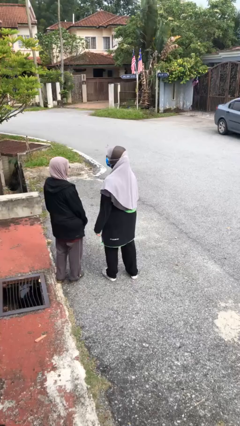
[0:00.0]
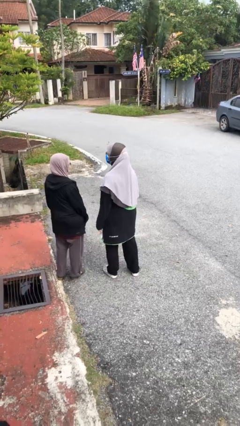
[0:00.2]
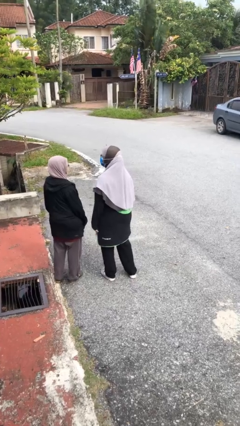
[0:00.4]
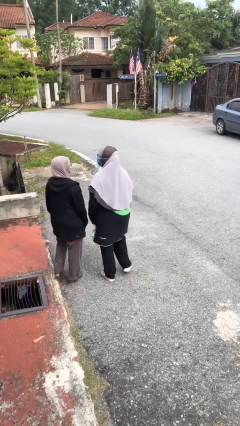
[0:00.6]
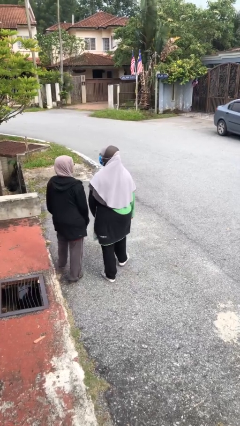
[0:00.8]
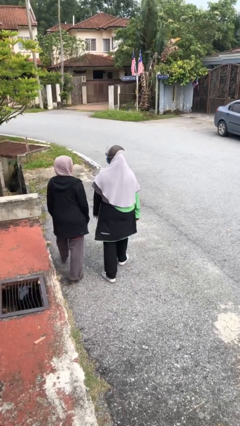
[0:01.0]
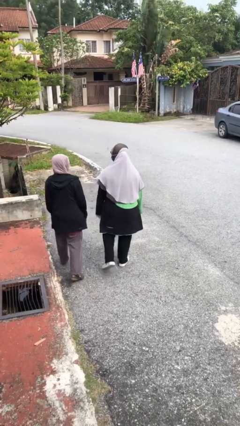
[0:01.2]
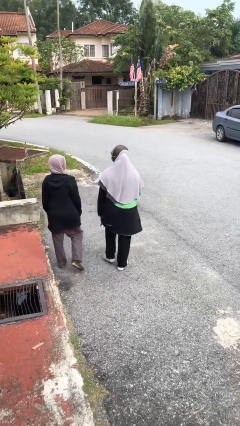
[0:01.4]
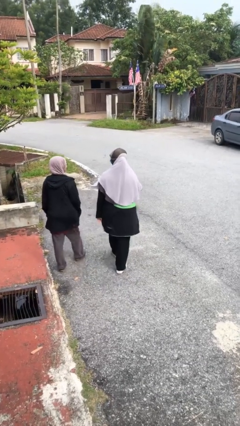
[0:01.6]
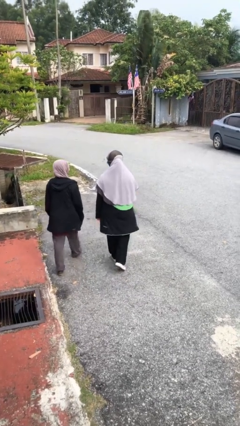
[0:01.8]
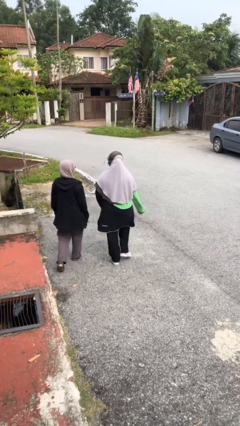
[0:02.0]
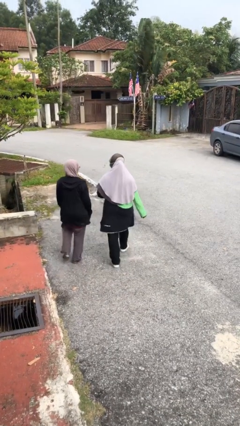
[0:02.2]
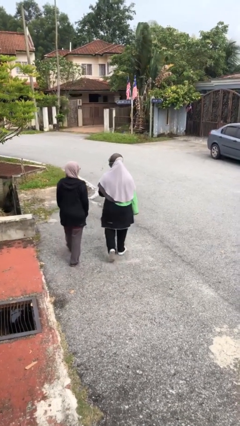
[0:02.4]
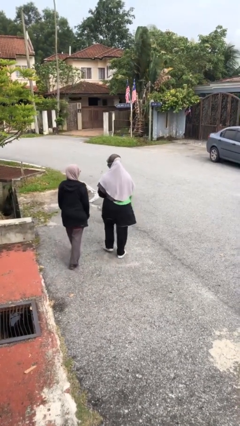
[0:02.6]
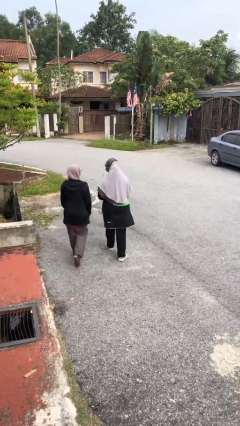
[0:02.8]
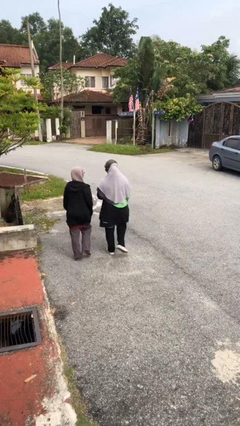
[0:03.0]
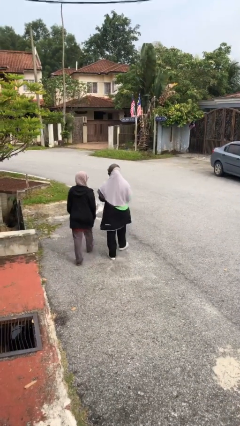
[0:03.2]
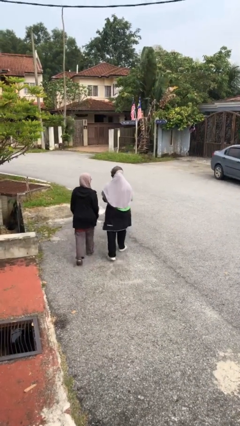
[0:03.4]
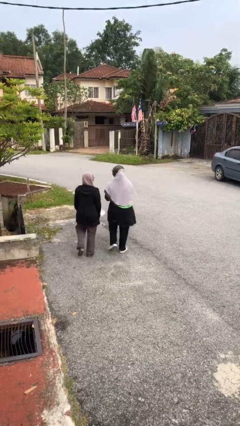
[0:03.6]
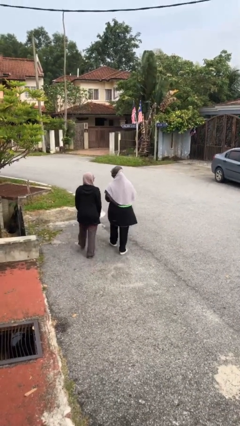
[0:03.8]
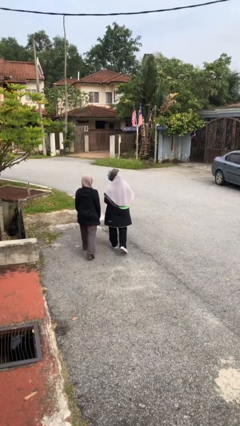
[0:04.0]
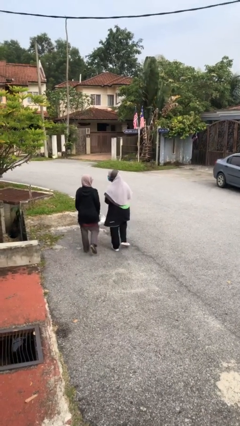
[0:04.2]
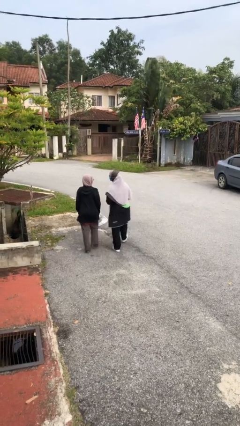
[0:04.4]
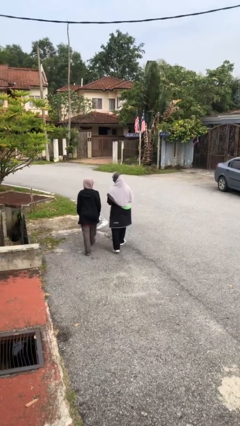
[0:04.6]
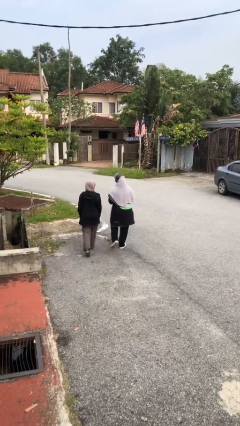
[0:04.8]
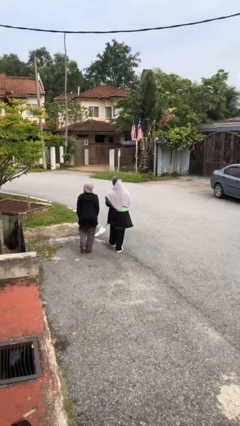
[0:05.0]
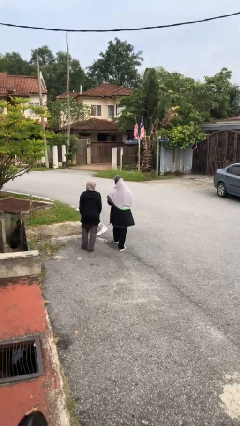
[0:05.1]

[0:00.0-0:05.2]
person talks to person

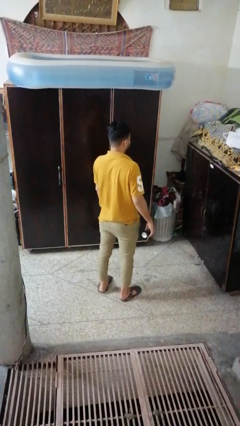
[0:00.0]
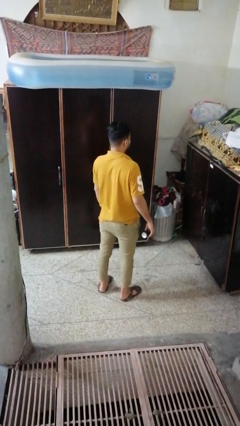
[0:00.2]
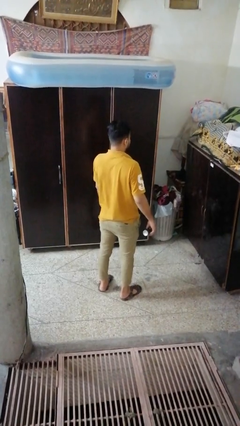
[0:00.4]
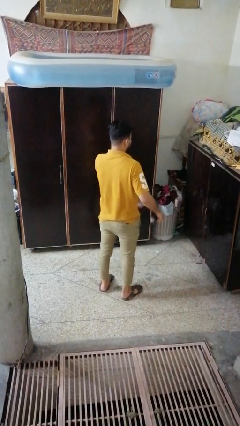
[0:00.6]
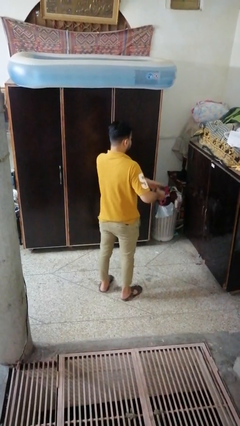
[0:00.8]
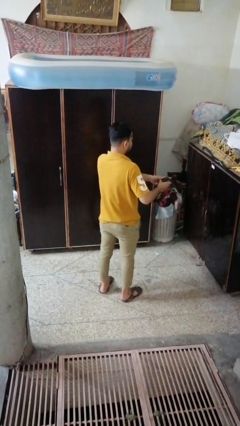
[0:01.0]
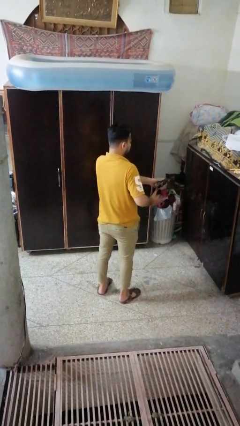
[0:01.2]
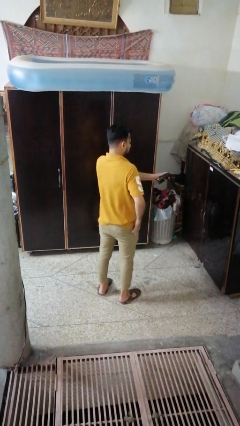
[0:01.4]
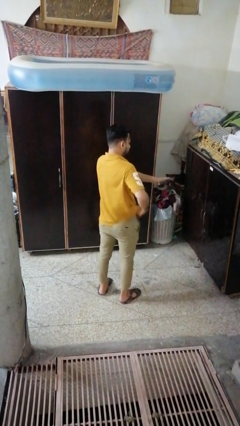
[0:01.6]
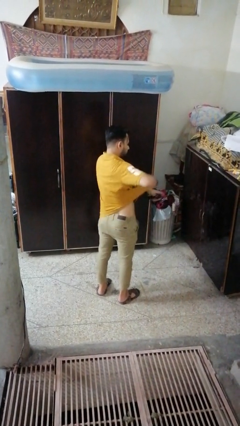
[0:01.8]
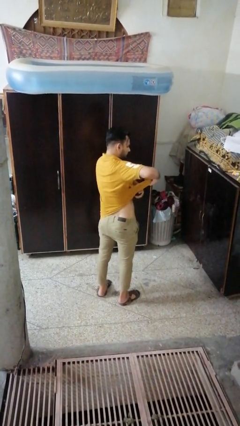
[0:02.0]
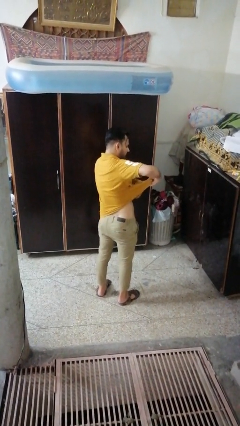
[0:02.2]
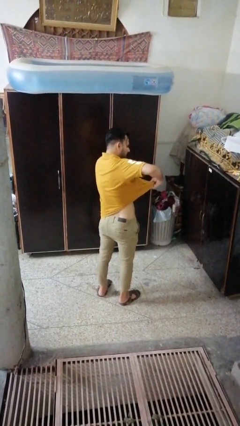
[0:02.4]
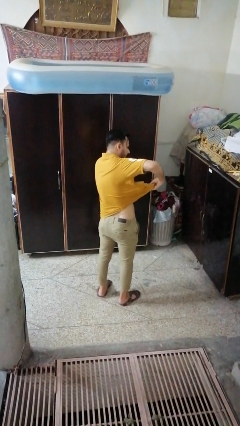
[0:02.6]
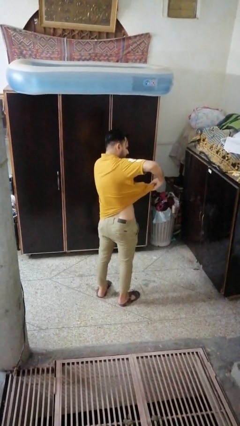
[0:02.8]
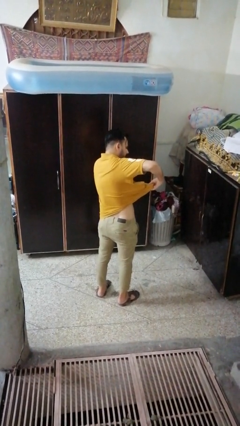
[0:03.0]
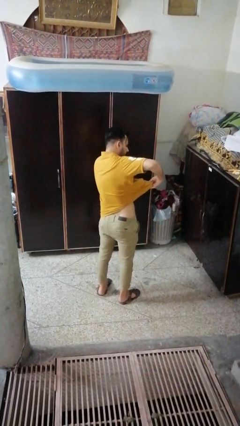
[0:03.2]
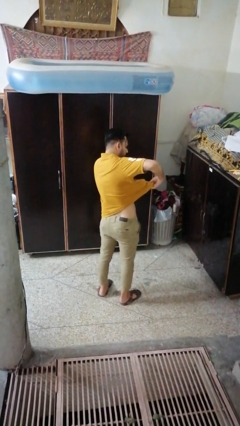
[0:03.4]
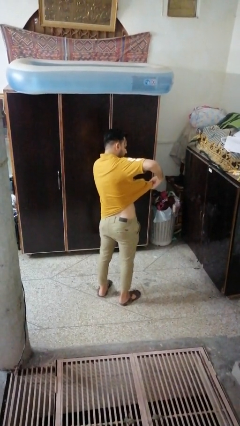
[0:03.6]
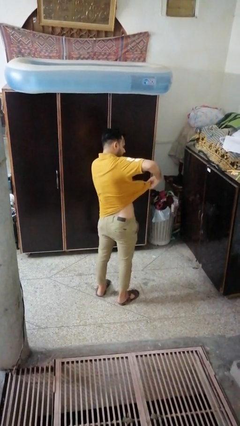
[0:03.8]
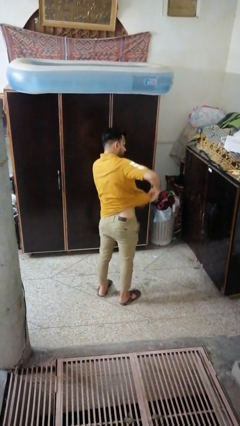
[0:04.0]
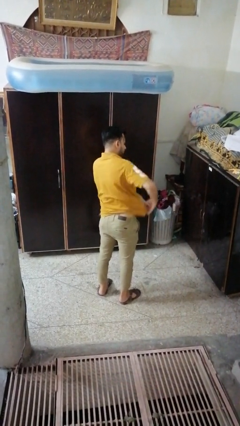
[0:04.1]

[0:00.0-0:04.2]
person applies deodorant

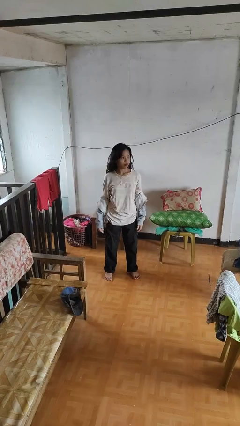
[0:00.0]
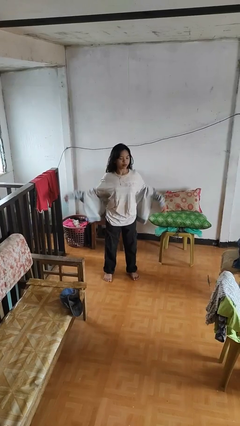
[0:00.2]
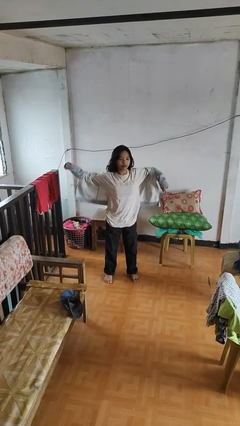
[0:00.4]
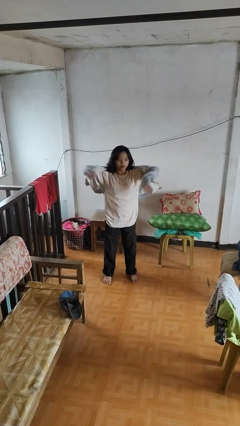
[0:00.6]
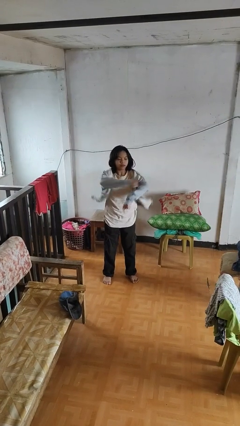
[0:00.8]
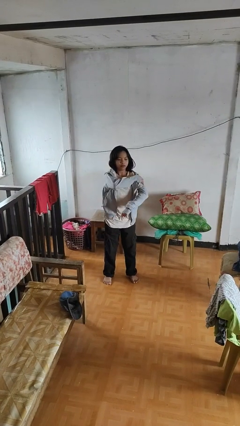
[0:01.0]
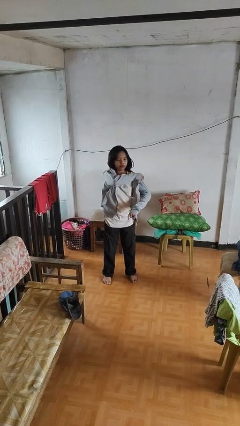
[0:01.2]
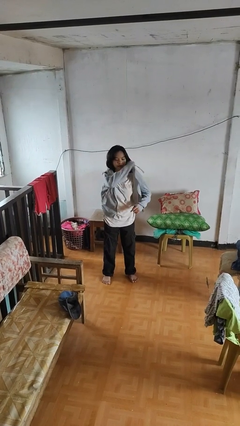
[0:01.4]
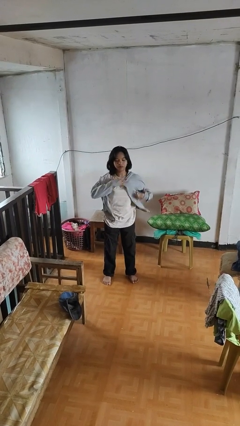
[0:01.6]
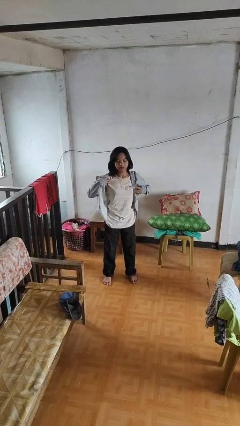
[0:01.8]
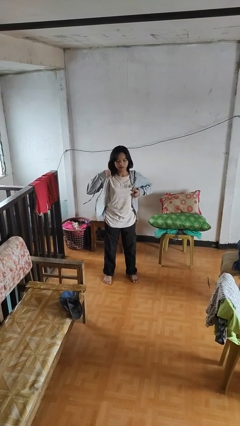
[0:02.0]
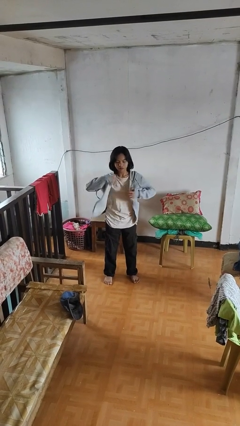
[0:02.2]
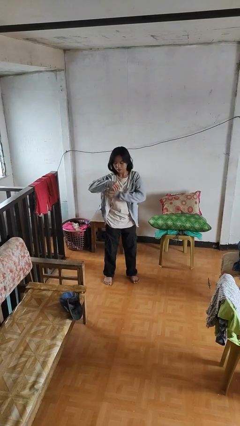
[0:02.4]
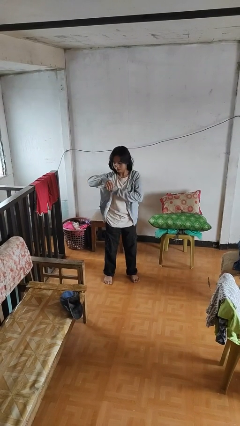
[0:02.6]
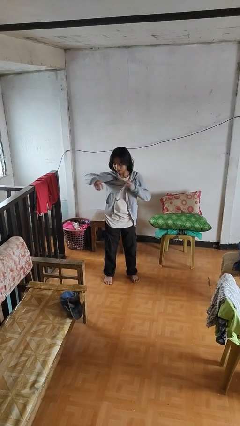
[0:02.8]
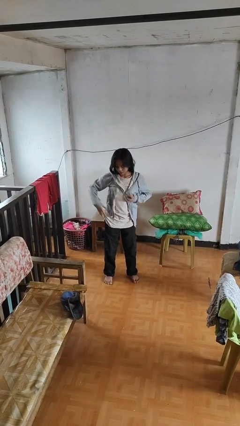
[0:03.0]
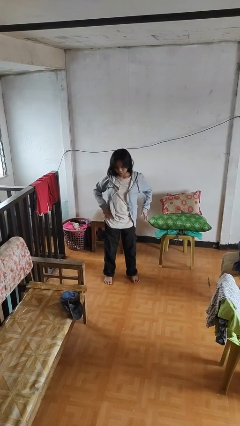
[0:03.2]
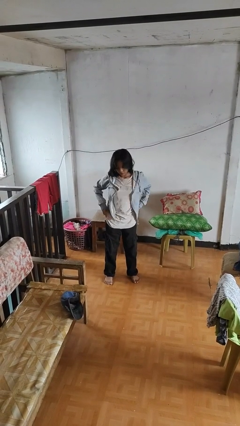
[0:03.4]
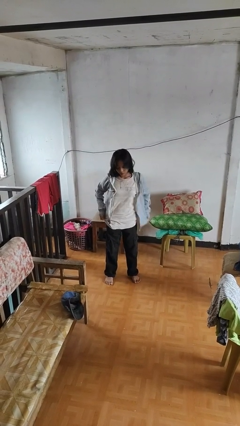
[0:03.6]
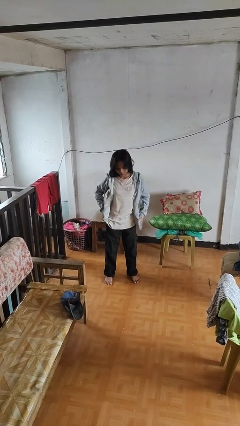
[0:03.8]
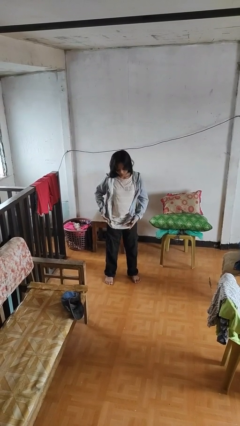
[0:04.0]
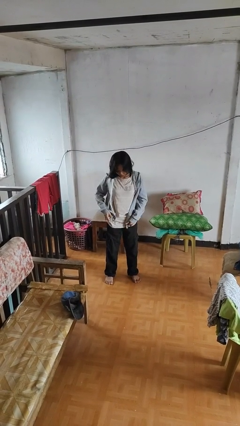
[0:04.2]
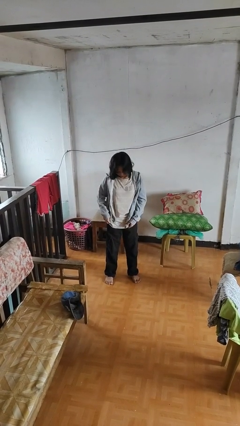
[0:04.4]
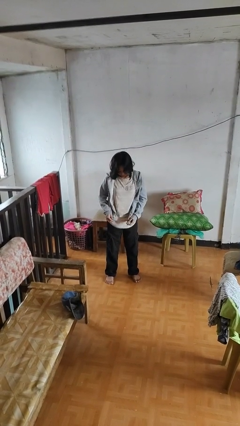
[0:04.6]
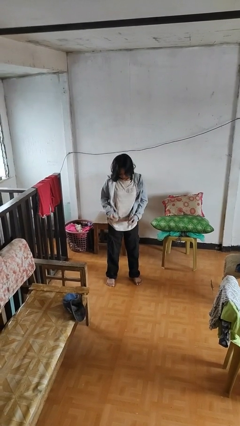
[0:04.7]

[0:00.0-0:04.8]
person puts on jacket

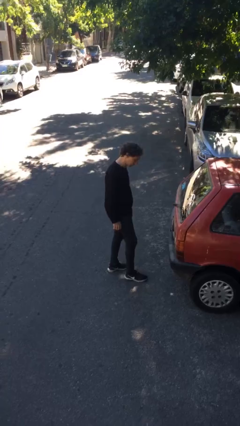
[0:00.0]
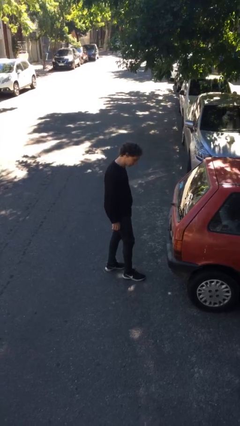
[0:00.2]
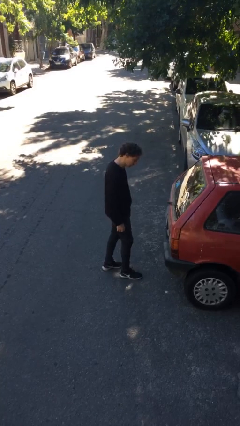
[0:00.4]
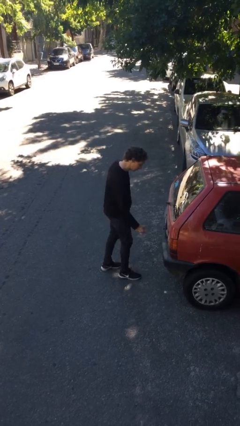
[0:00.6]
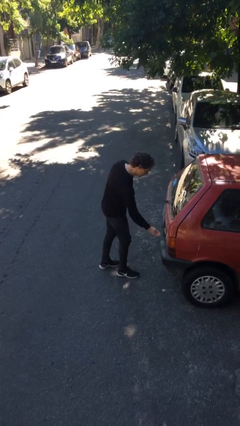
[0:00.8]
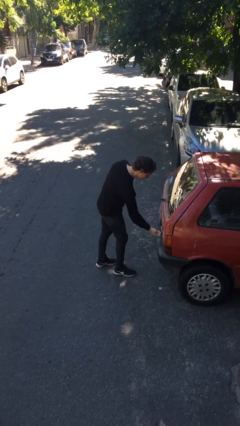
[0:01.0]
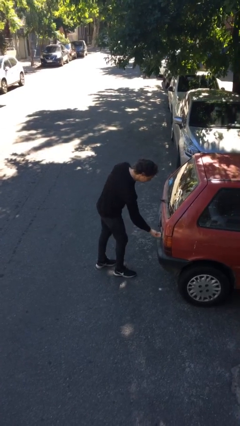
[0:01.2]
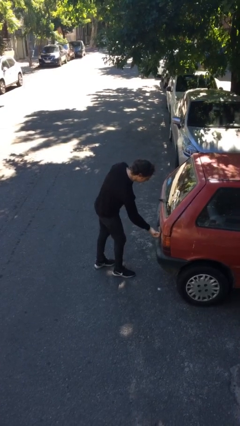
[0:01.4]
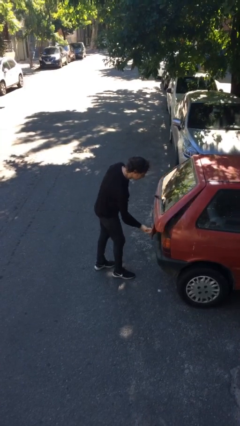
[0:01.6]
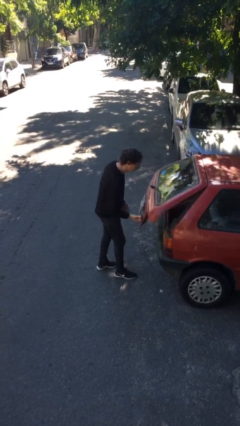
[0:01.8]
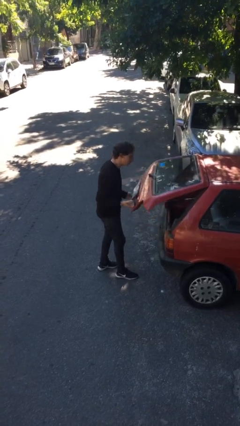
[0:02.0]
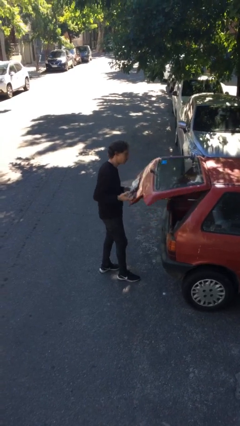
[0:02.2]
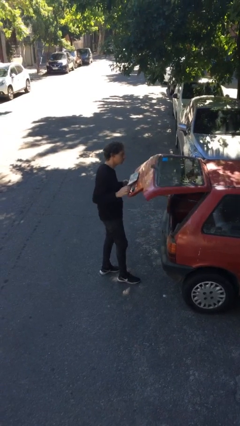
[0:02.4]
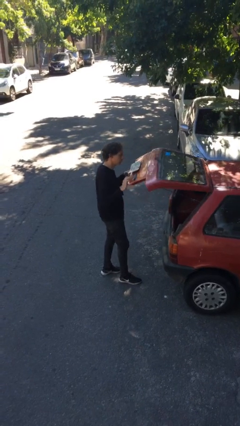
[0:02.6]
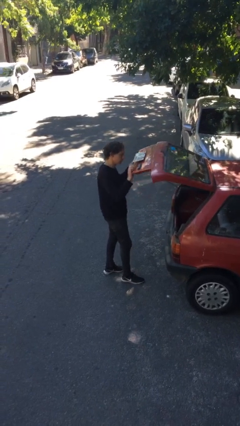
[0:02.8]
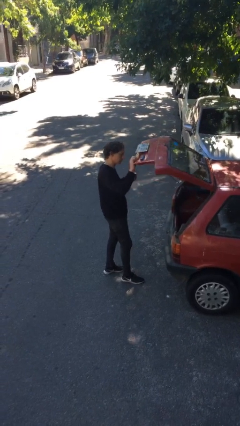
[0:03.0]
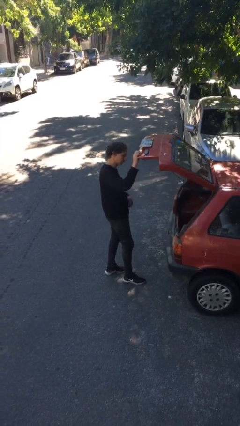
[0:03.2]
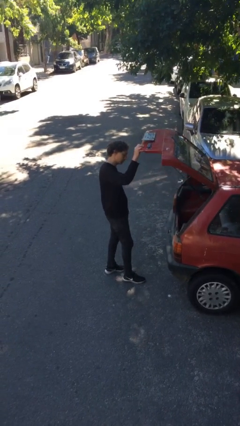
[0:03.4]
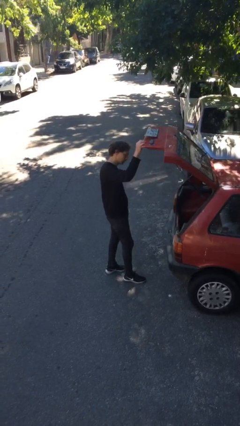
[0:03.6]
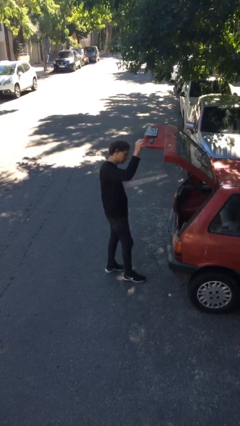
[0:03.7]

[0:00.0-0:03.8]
person opens car trunk
